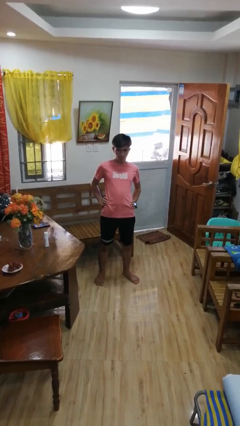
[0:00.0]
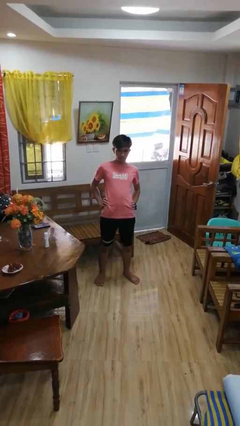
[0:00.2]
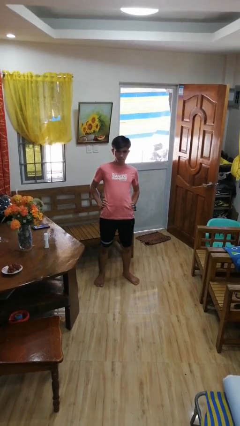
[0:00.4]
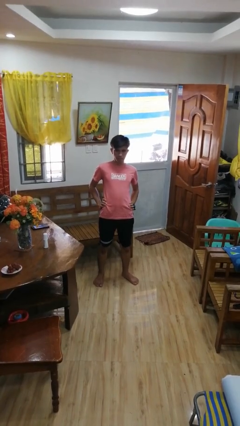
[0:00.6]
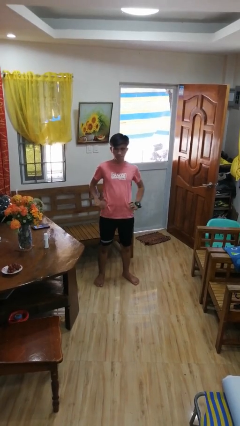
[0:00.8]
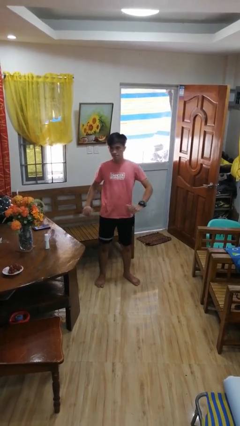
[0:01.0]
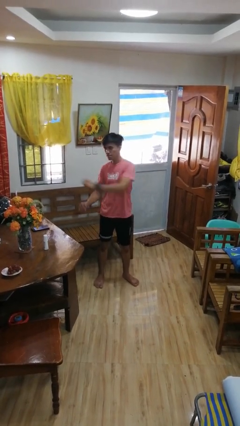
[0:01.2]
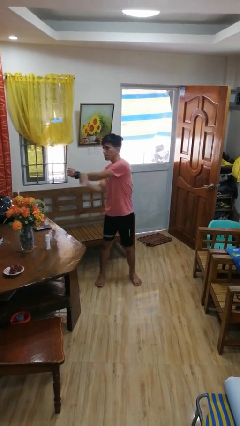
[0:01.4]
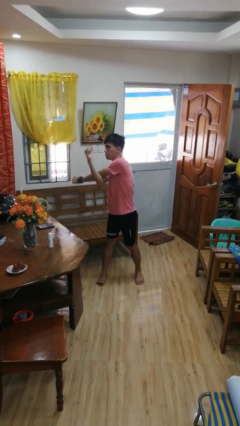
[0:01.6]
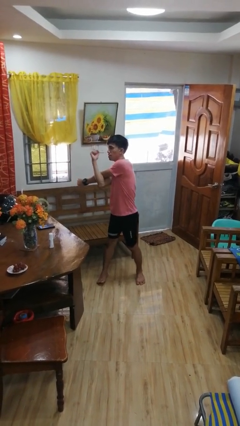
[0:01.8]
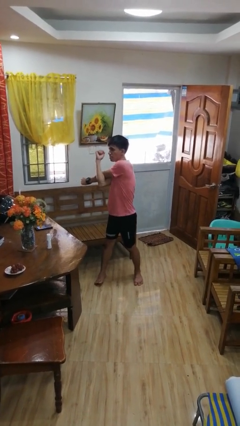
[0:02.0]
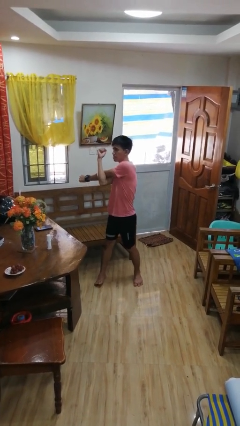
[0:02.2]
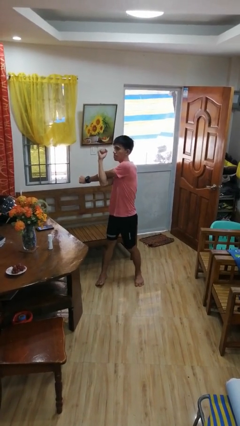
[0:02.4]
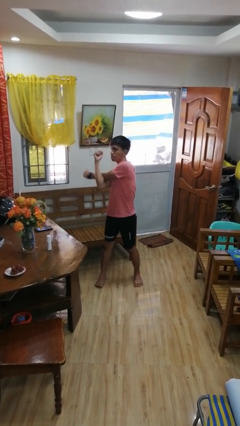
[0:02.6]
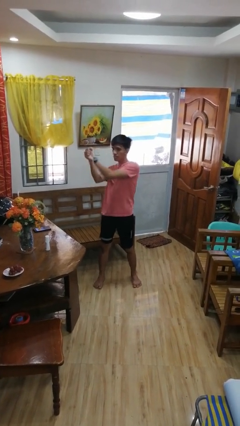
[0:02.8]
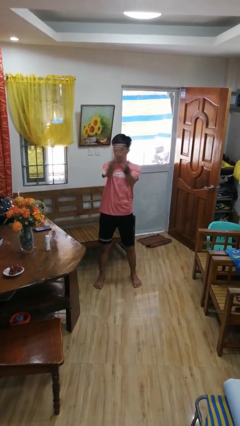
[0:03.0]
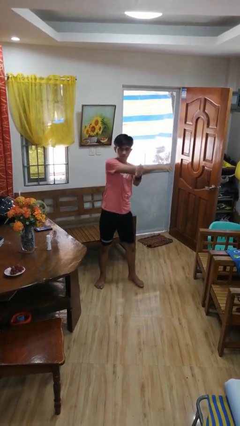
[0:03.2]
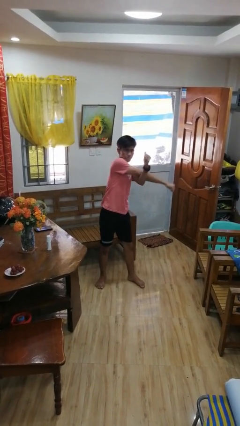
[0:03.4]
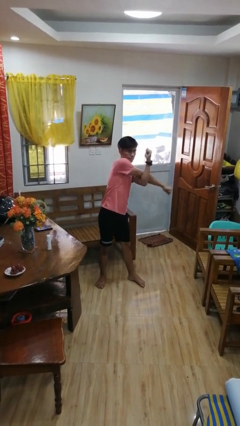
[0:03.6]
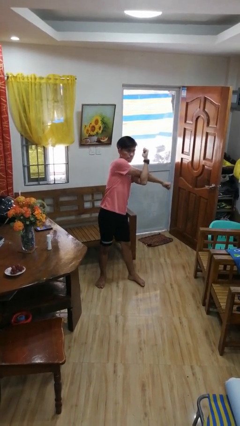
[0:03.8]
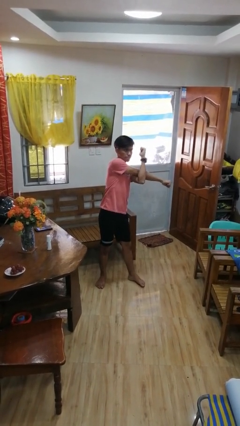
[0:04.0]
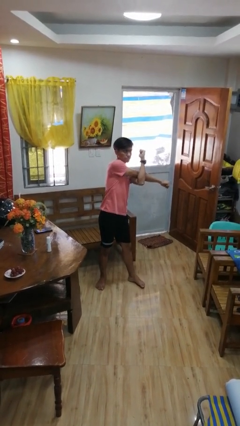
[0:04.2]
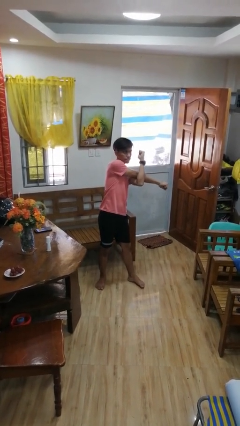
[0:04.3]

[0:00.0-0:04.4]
person stretches arms to side

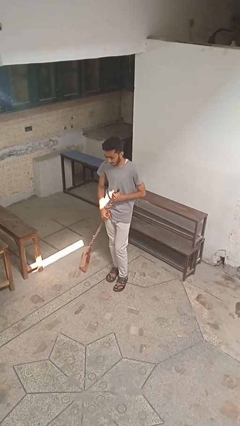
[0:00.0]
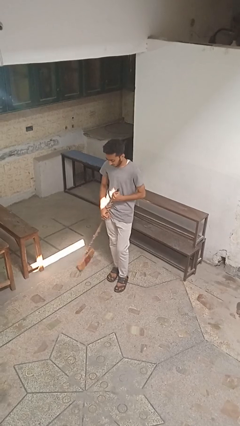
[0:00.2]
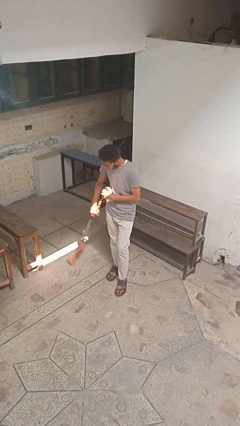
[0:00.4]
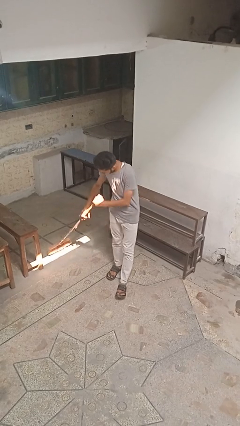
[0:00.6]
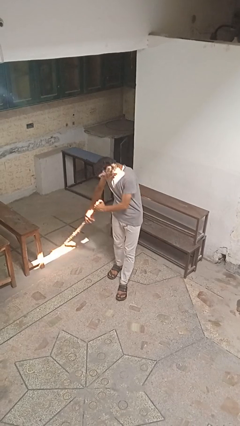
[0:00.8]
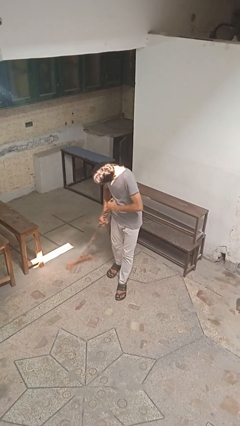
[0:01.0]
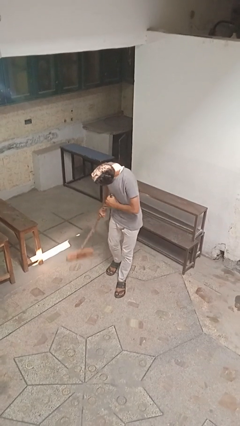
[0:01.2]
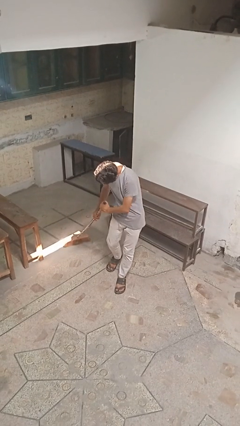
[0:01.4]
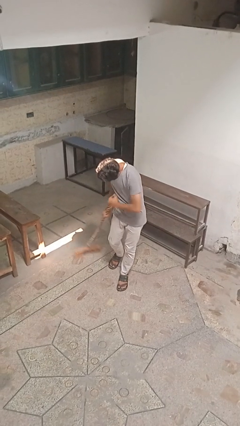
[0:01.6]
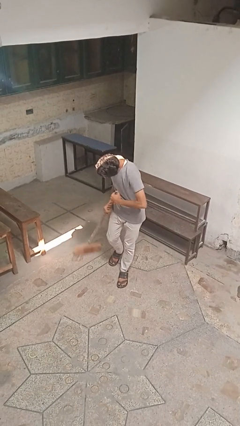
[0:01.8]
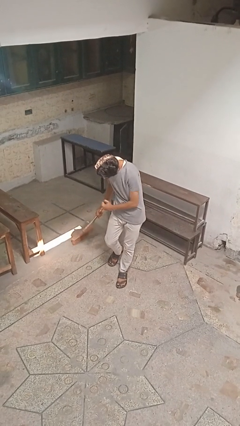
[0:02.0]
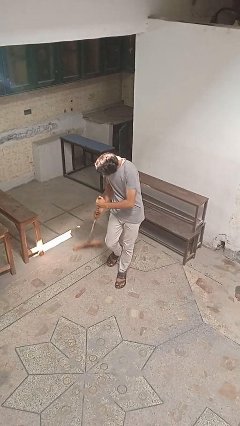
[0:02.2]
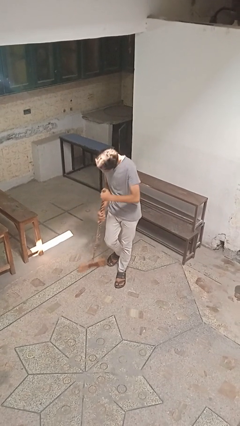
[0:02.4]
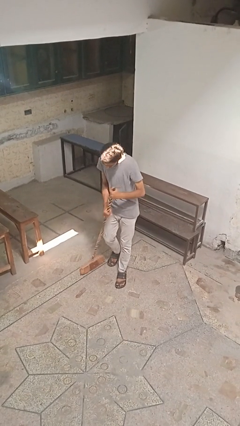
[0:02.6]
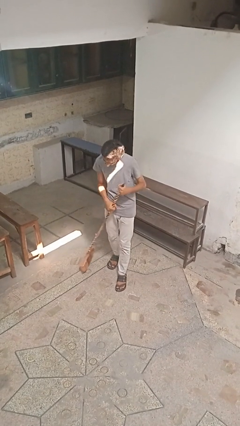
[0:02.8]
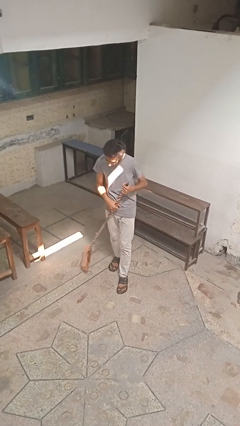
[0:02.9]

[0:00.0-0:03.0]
person sweeps floor

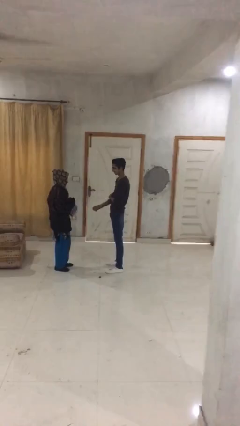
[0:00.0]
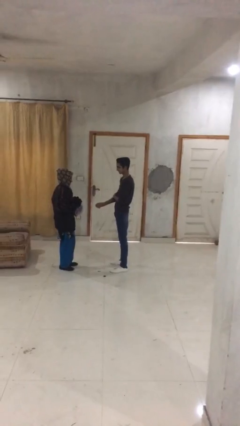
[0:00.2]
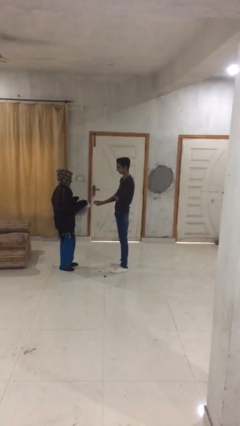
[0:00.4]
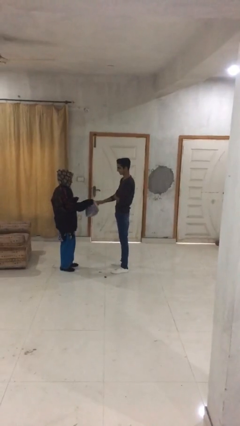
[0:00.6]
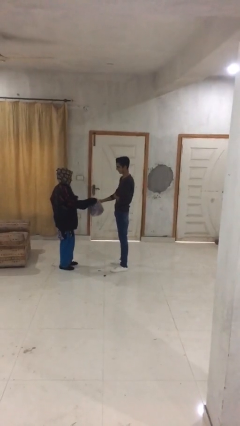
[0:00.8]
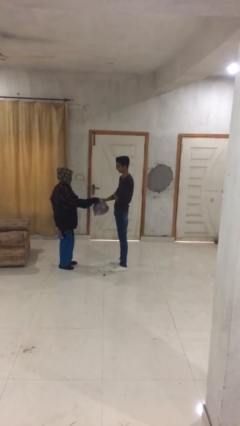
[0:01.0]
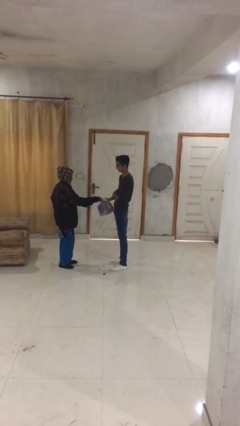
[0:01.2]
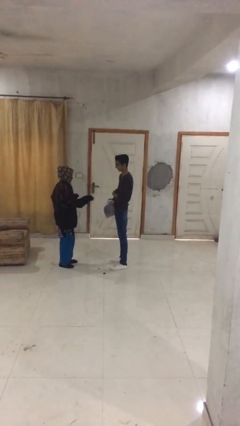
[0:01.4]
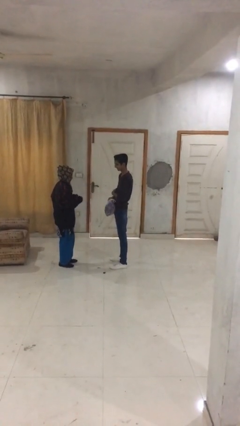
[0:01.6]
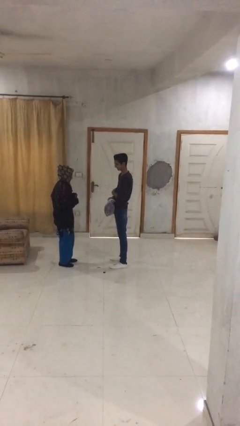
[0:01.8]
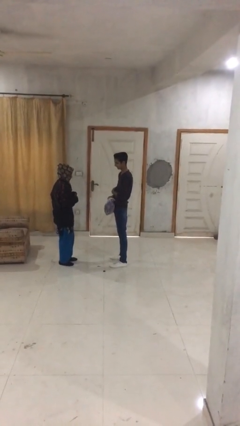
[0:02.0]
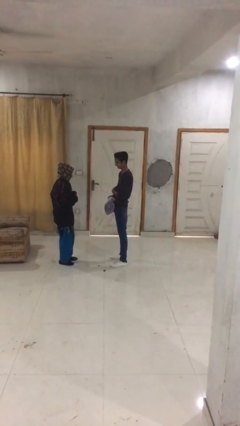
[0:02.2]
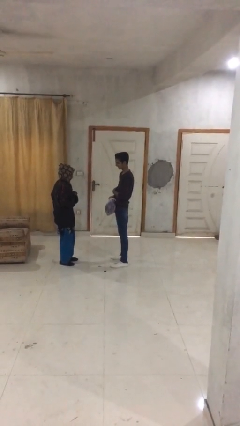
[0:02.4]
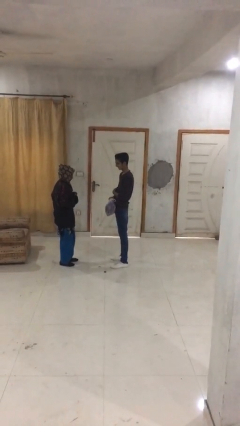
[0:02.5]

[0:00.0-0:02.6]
person transfers object to person

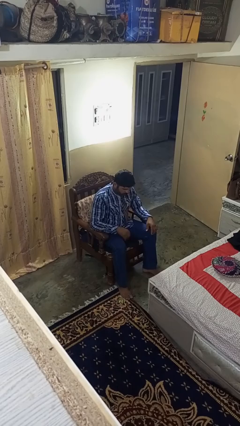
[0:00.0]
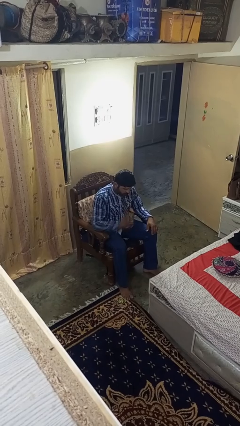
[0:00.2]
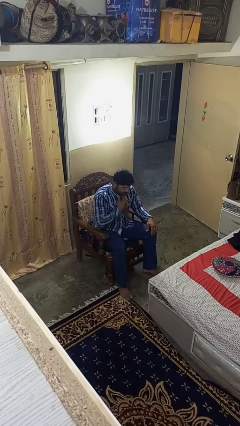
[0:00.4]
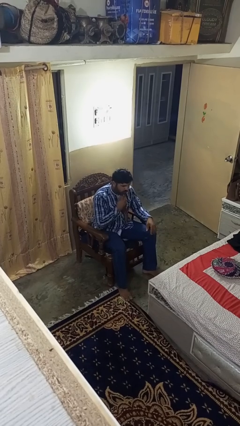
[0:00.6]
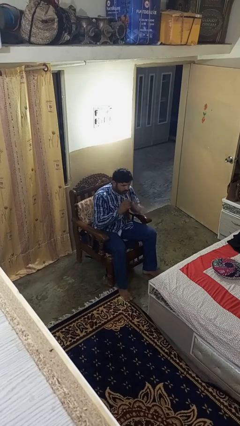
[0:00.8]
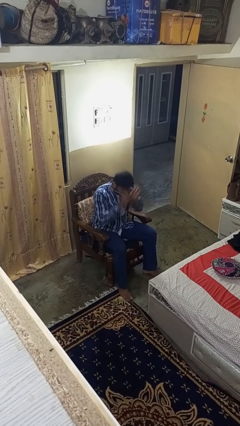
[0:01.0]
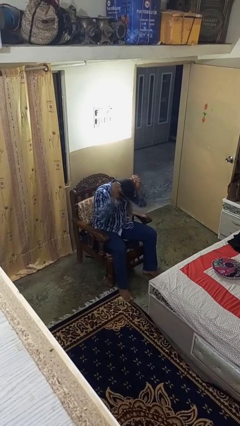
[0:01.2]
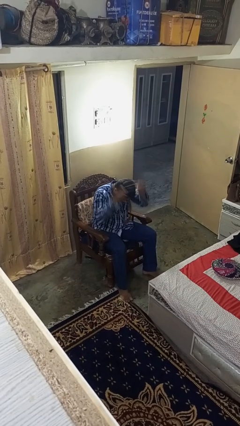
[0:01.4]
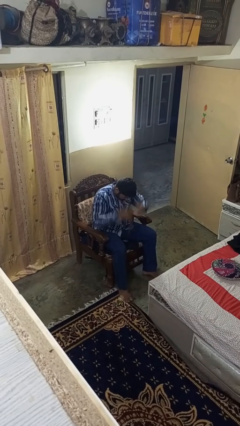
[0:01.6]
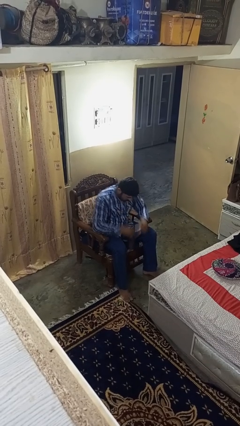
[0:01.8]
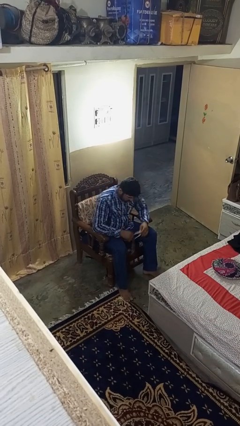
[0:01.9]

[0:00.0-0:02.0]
person takes off necktie

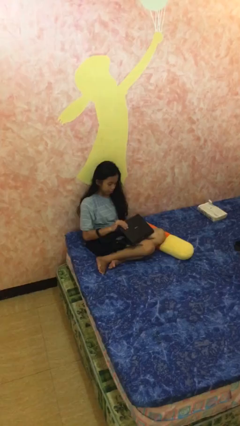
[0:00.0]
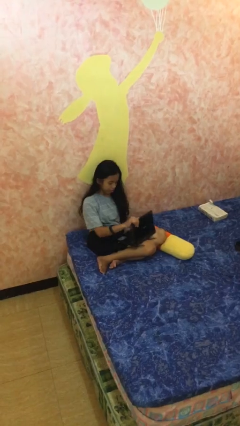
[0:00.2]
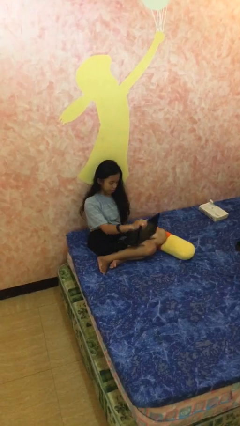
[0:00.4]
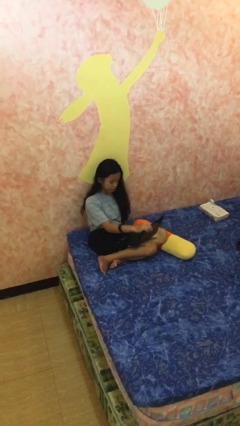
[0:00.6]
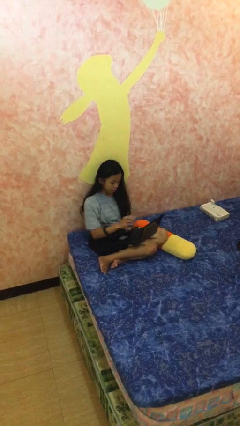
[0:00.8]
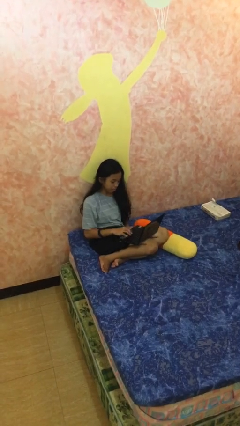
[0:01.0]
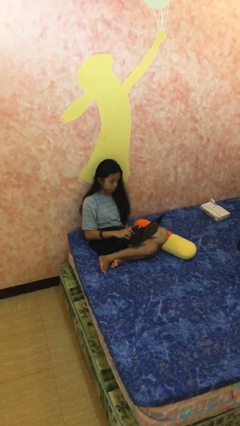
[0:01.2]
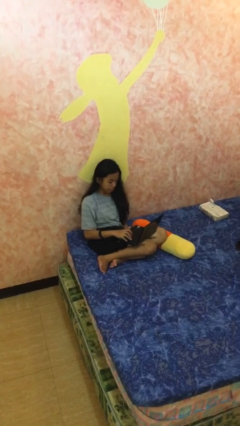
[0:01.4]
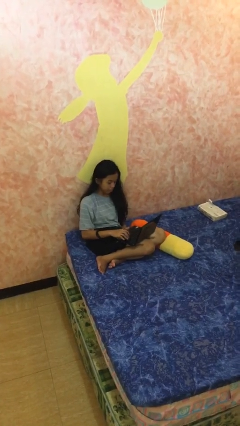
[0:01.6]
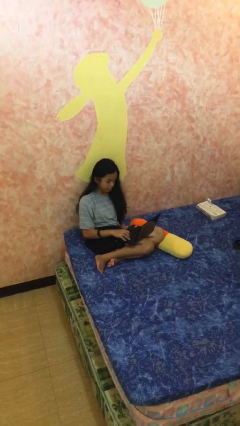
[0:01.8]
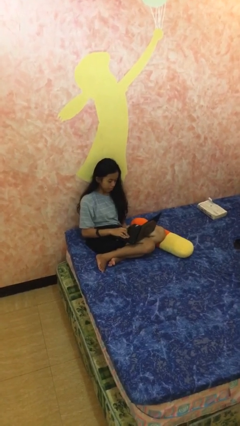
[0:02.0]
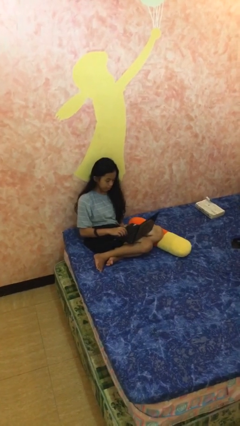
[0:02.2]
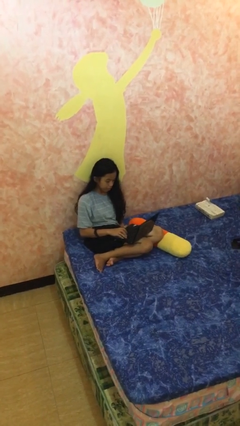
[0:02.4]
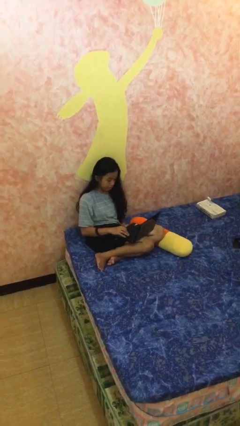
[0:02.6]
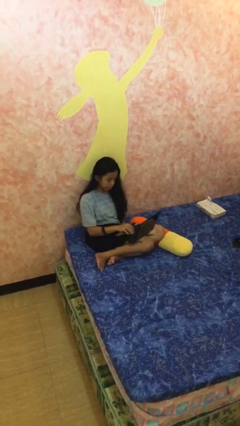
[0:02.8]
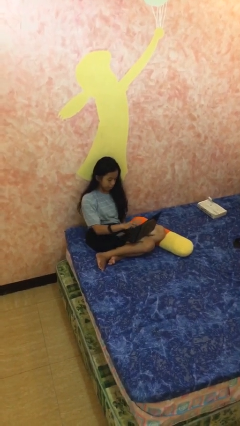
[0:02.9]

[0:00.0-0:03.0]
person interacts with laptop

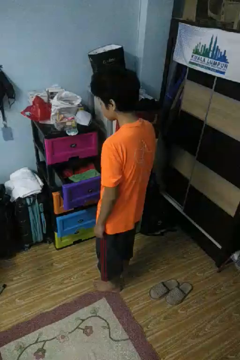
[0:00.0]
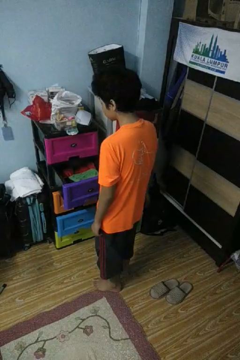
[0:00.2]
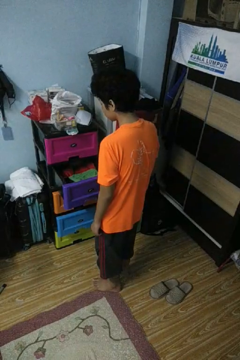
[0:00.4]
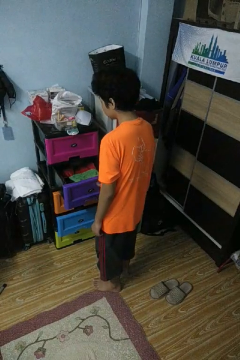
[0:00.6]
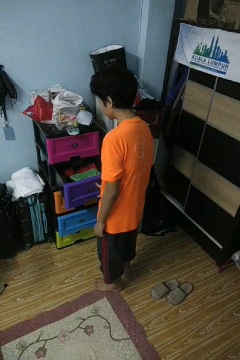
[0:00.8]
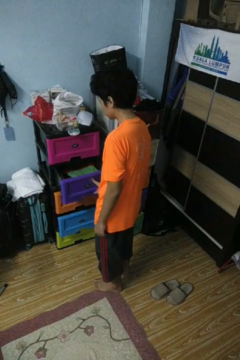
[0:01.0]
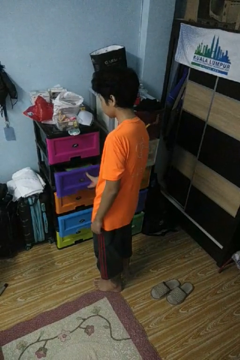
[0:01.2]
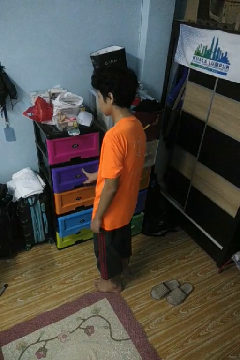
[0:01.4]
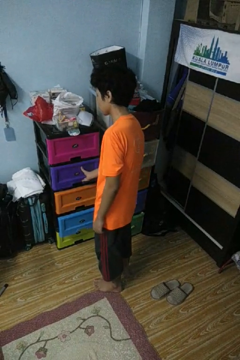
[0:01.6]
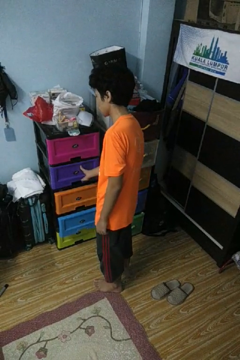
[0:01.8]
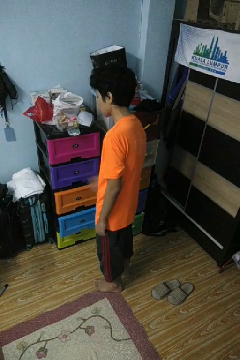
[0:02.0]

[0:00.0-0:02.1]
person closes dresser drawer

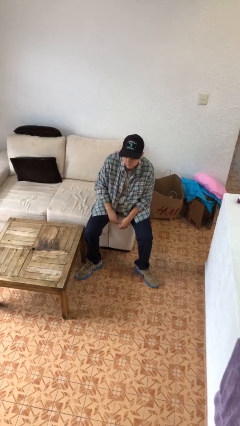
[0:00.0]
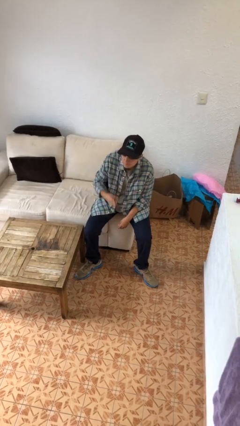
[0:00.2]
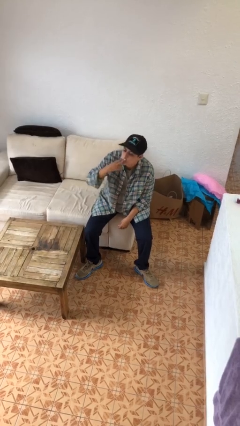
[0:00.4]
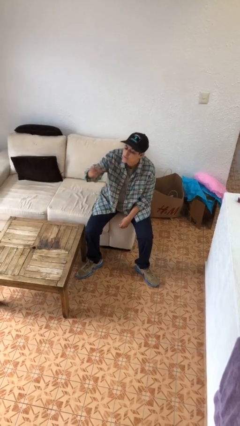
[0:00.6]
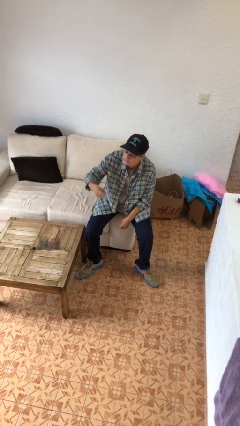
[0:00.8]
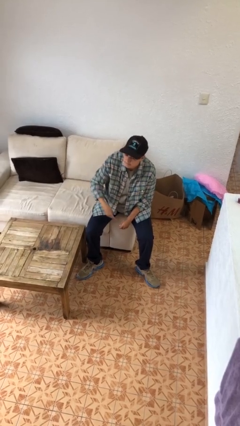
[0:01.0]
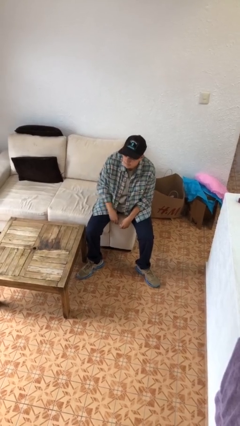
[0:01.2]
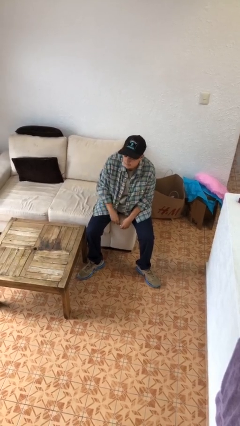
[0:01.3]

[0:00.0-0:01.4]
person gestures blow kiss
